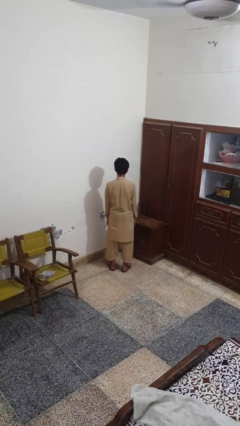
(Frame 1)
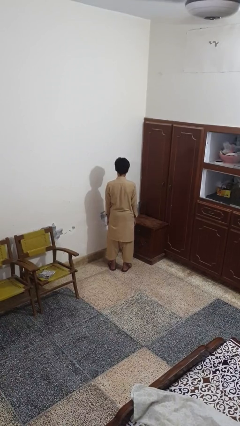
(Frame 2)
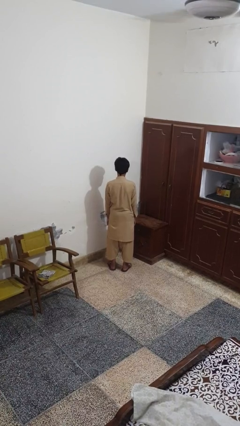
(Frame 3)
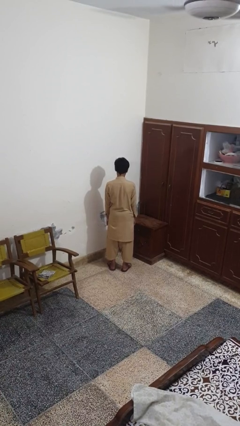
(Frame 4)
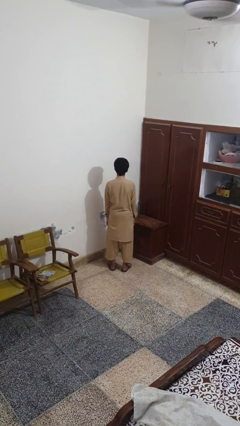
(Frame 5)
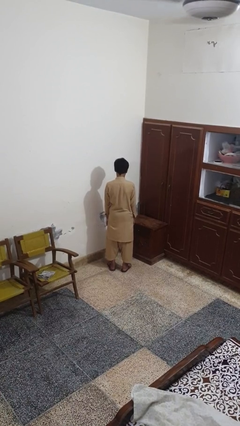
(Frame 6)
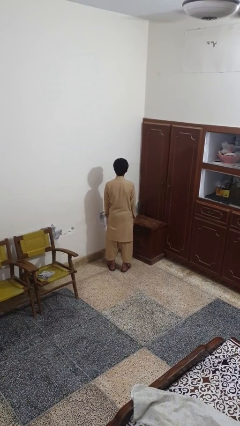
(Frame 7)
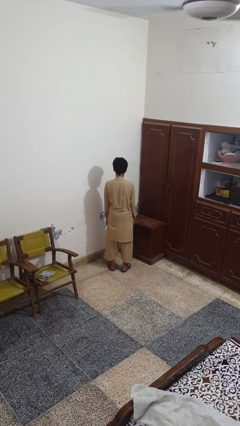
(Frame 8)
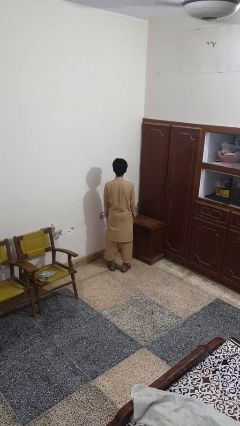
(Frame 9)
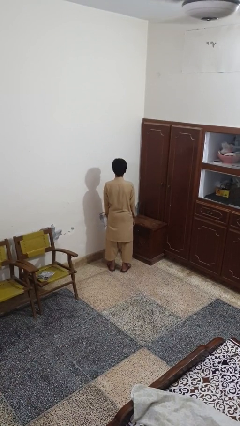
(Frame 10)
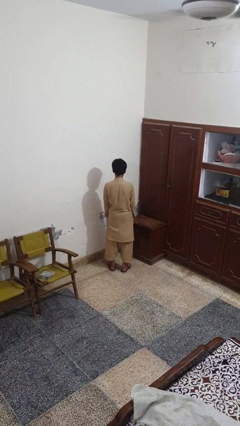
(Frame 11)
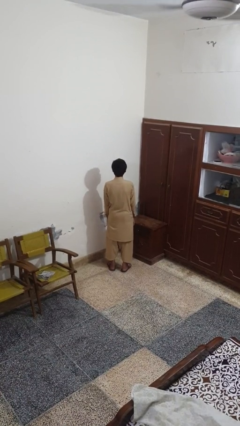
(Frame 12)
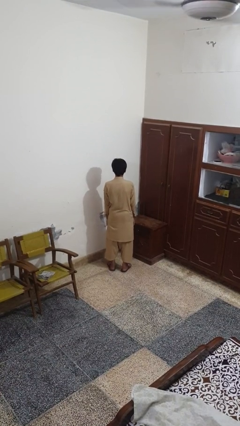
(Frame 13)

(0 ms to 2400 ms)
person nods head

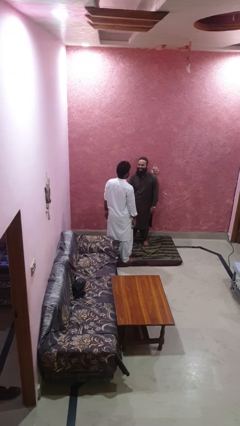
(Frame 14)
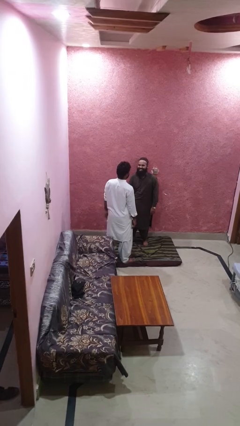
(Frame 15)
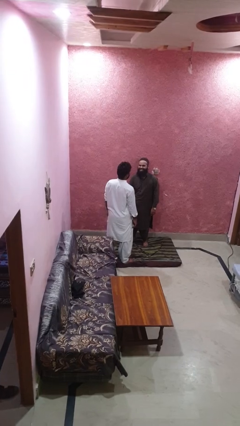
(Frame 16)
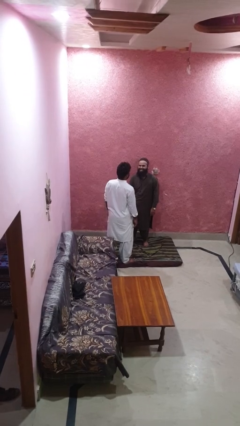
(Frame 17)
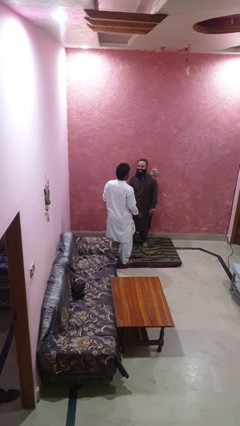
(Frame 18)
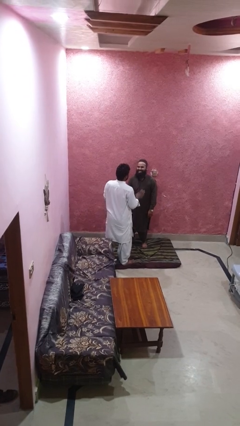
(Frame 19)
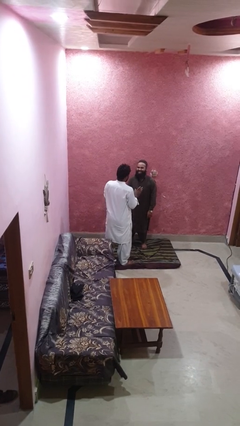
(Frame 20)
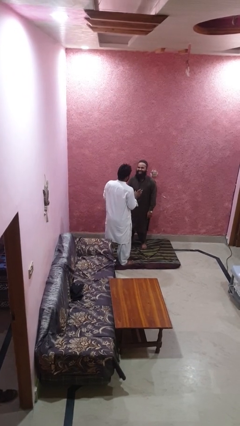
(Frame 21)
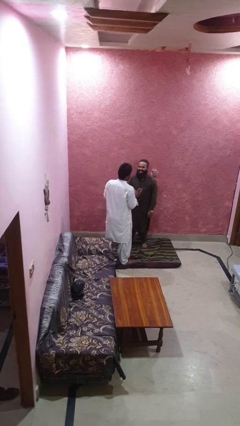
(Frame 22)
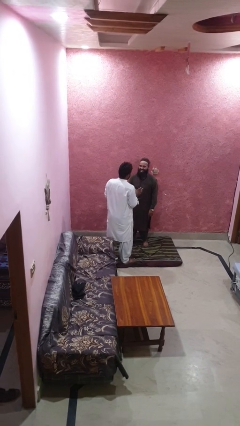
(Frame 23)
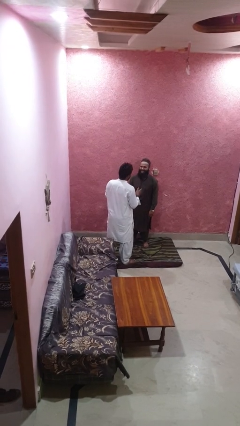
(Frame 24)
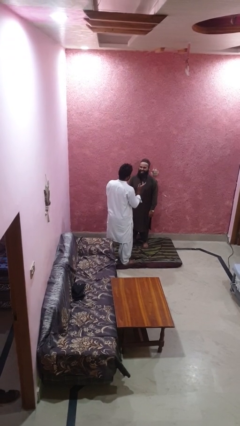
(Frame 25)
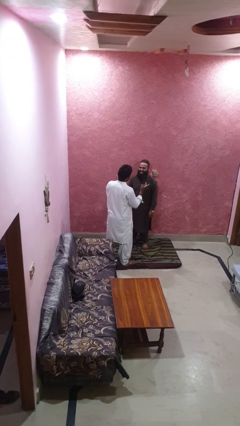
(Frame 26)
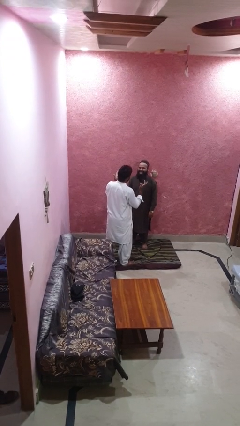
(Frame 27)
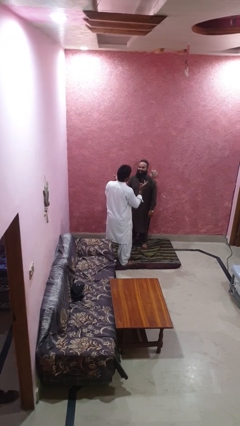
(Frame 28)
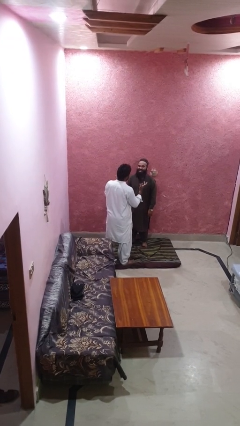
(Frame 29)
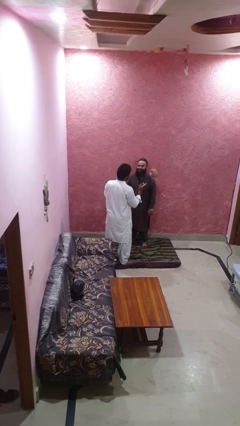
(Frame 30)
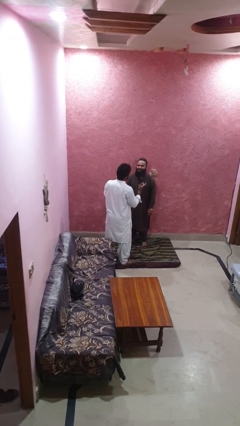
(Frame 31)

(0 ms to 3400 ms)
person laughs with person

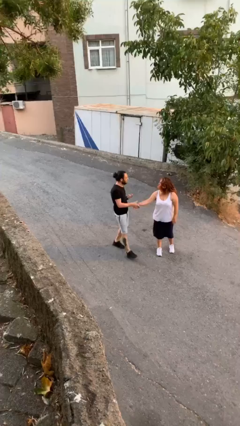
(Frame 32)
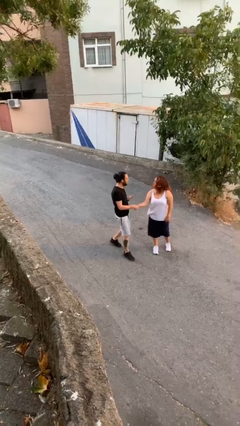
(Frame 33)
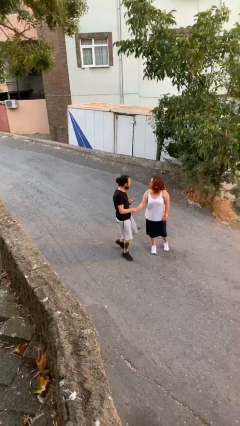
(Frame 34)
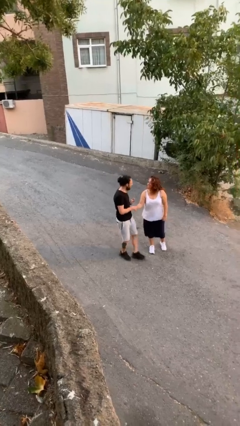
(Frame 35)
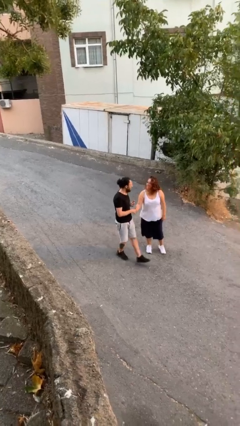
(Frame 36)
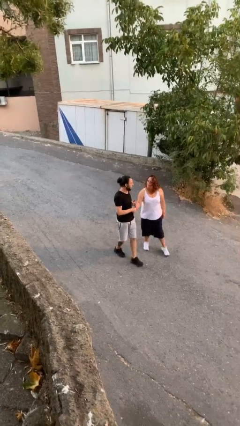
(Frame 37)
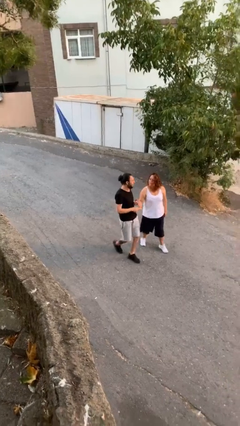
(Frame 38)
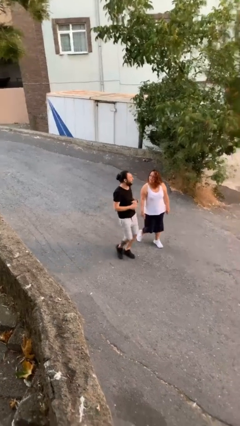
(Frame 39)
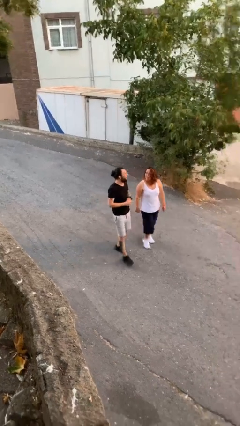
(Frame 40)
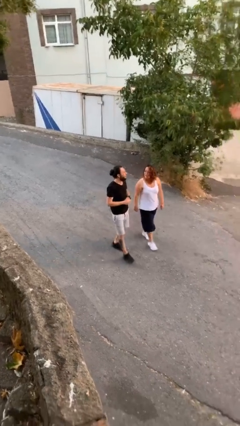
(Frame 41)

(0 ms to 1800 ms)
person shakes hand

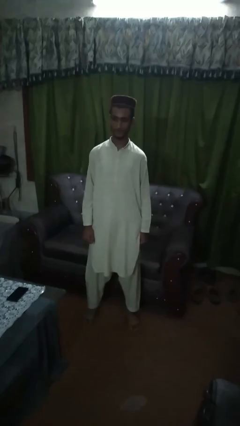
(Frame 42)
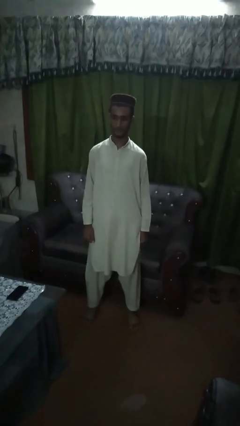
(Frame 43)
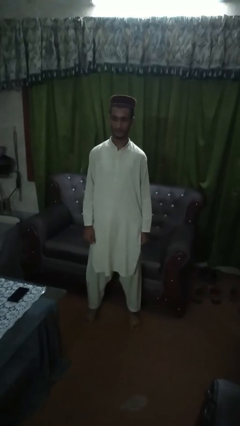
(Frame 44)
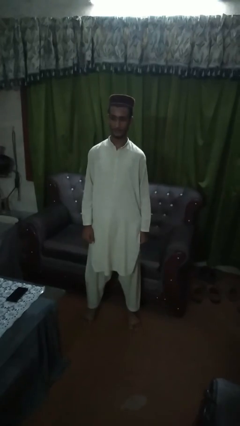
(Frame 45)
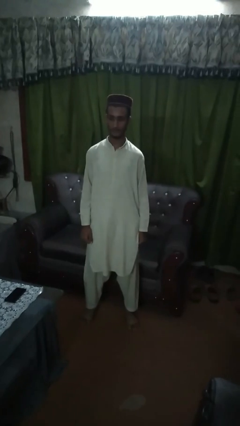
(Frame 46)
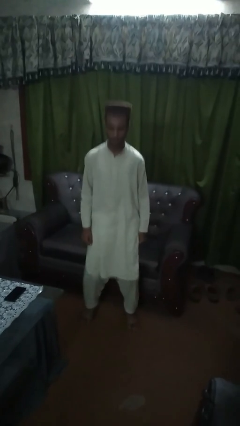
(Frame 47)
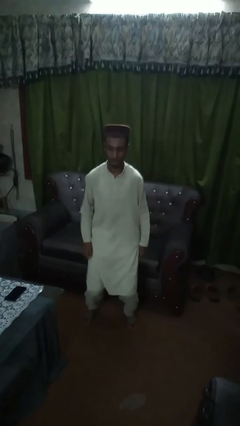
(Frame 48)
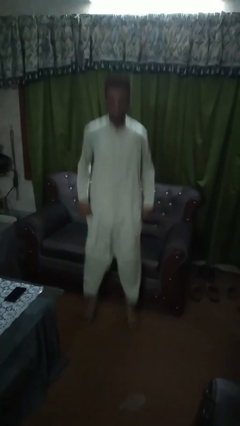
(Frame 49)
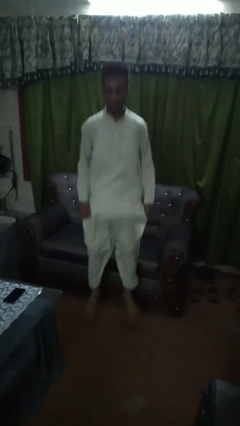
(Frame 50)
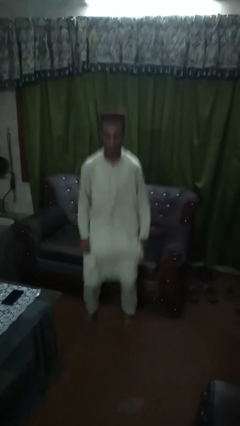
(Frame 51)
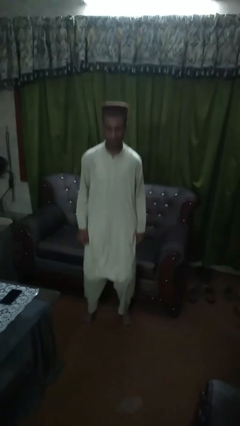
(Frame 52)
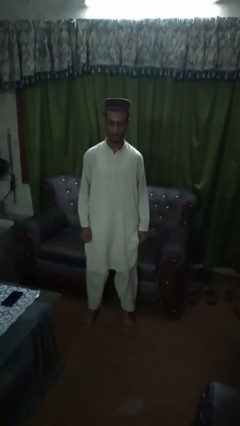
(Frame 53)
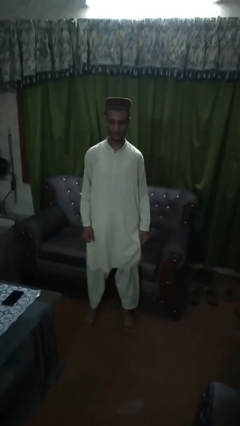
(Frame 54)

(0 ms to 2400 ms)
person jumps

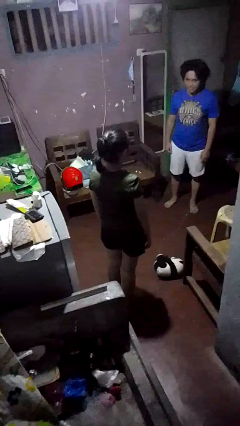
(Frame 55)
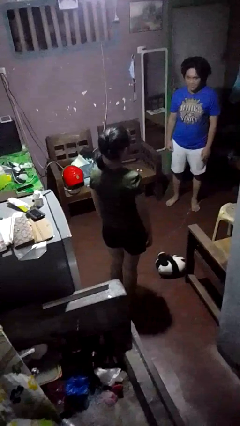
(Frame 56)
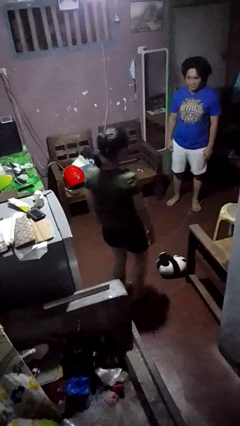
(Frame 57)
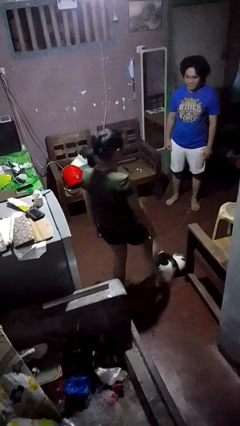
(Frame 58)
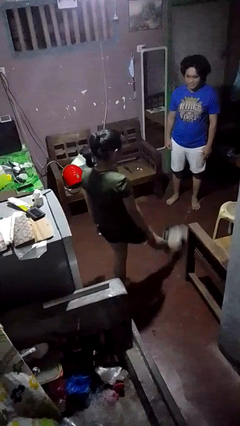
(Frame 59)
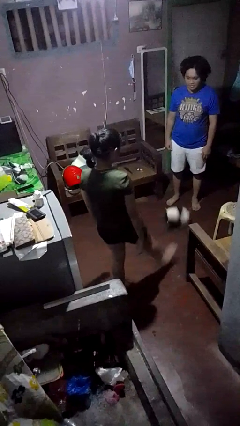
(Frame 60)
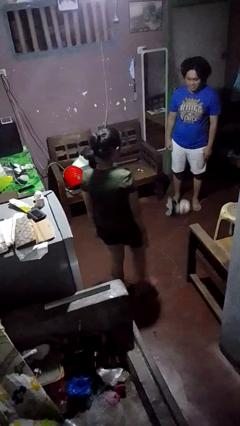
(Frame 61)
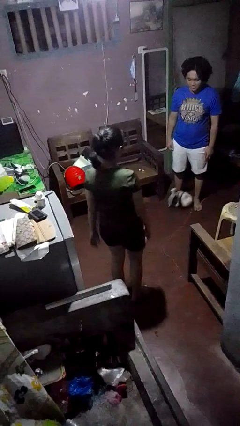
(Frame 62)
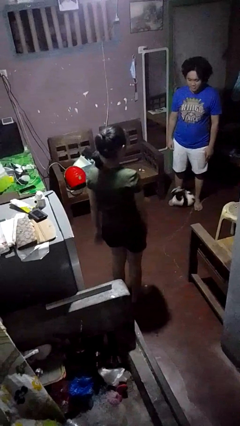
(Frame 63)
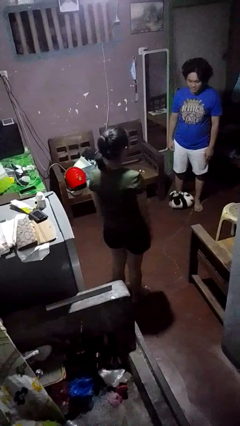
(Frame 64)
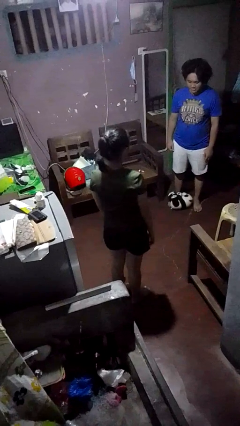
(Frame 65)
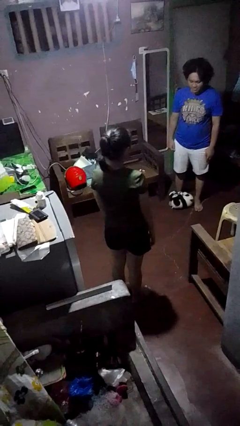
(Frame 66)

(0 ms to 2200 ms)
person kicks object to person

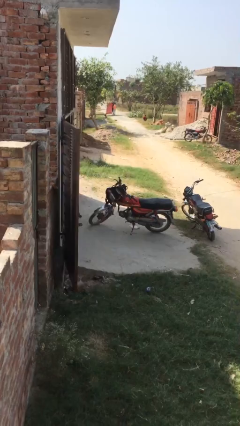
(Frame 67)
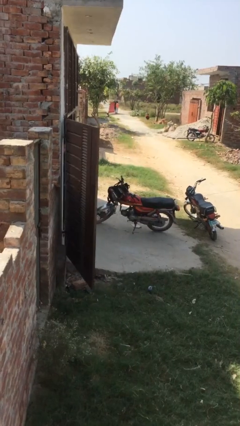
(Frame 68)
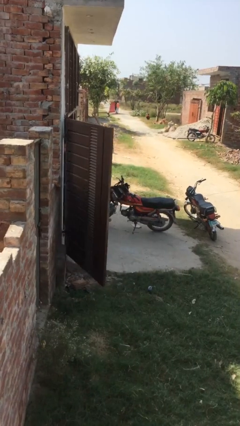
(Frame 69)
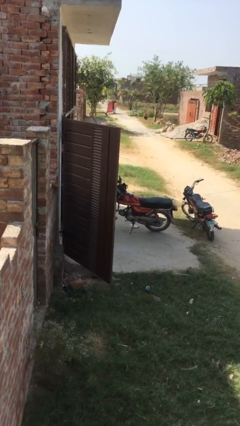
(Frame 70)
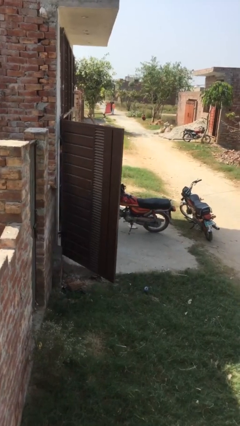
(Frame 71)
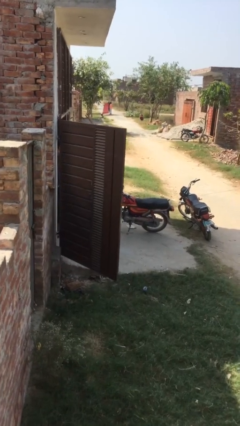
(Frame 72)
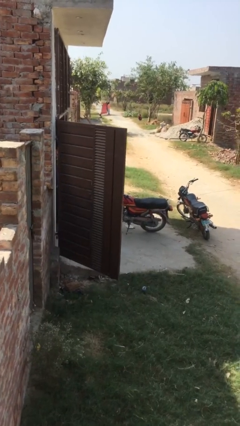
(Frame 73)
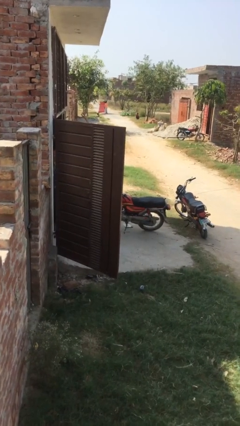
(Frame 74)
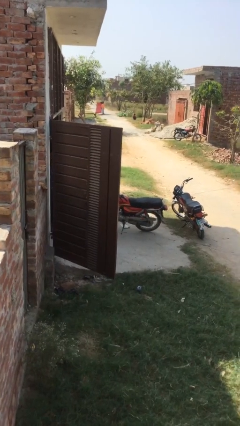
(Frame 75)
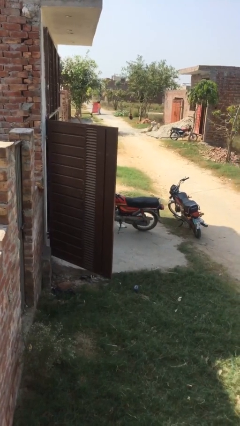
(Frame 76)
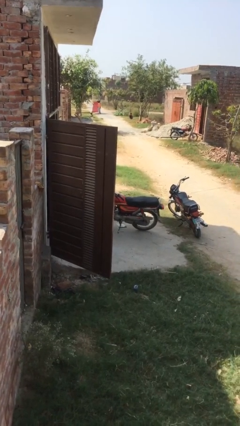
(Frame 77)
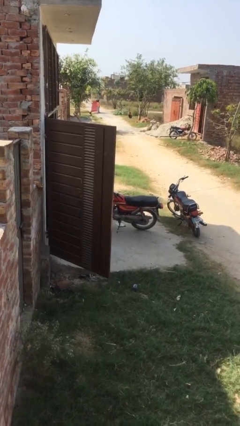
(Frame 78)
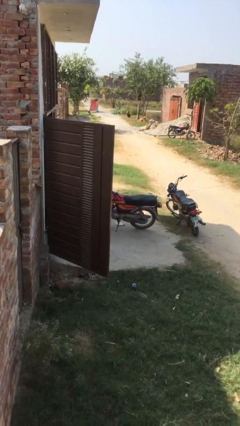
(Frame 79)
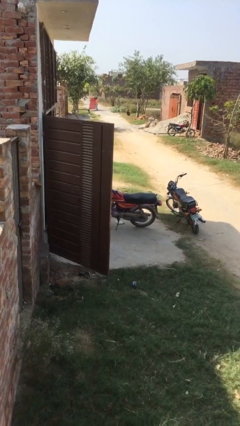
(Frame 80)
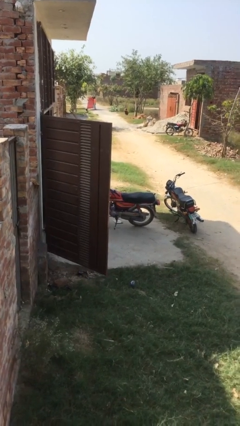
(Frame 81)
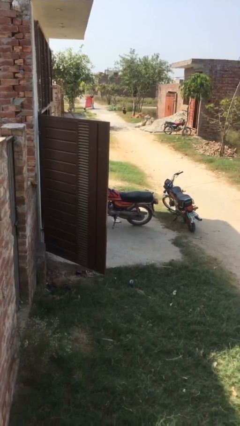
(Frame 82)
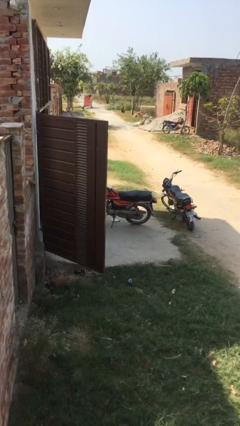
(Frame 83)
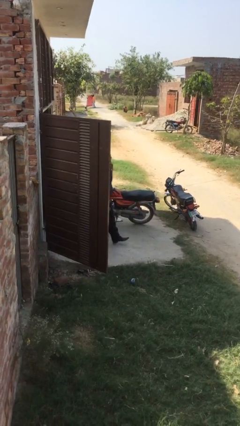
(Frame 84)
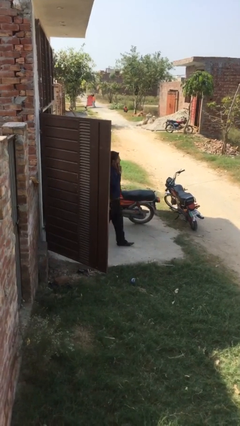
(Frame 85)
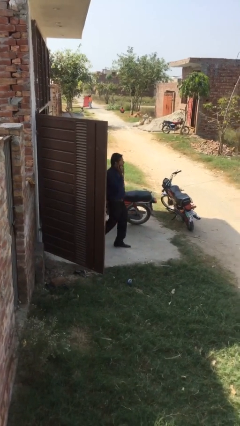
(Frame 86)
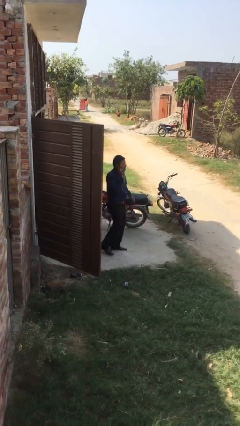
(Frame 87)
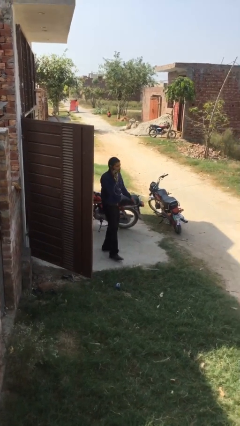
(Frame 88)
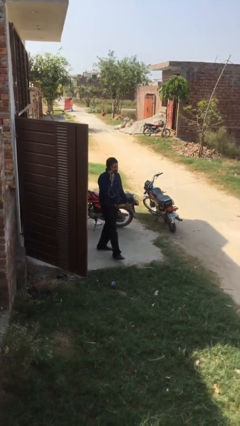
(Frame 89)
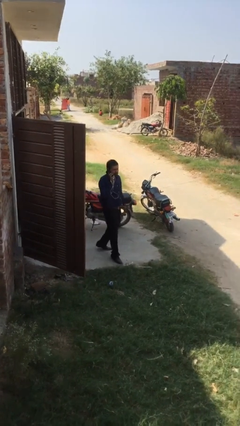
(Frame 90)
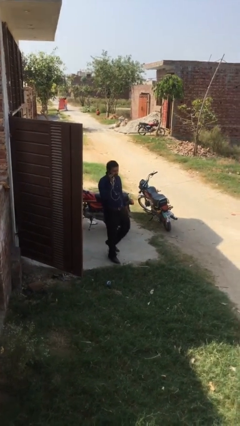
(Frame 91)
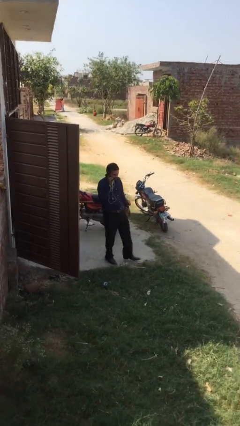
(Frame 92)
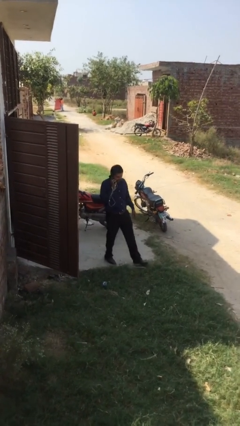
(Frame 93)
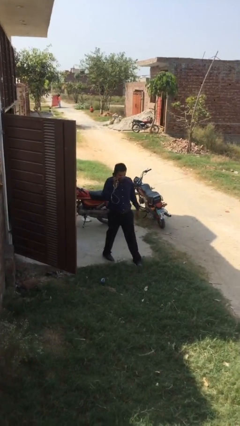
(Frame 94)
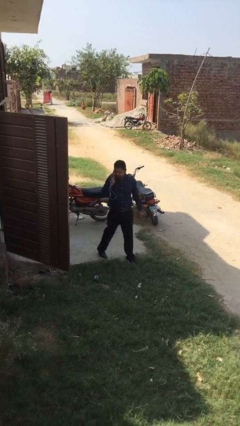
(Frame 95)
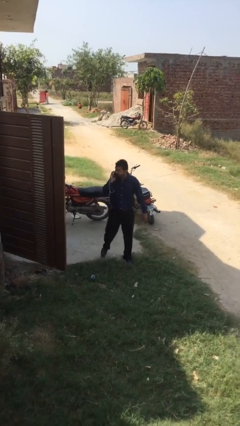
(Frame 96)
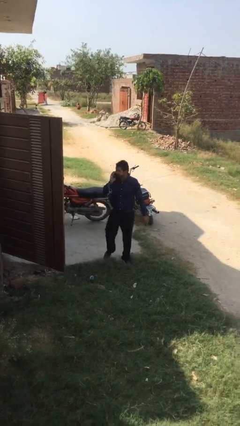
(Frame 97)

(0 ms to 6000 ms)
person enters scene through structure
